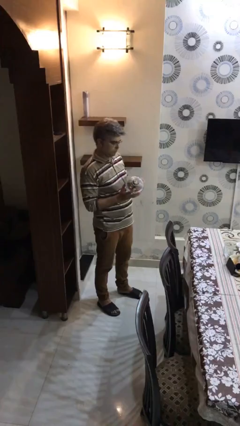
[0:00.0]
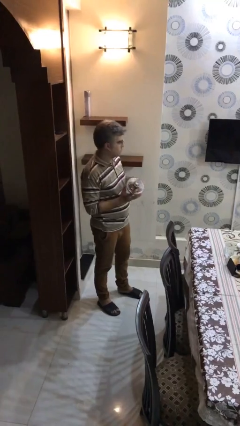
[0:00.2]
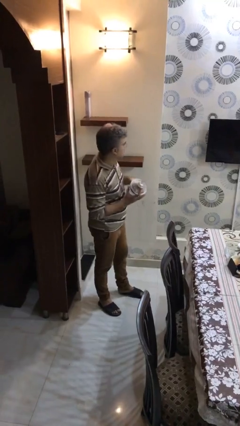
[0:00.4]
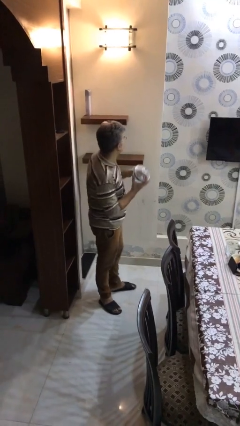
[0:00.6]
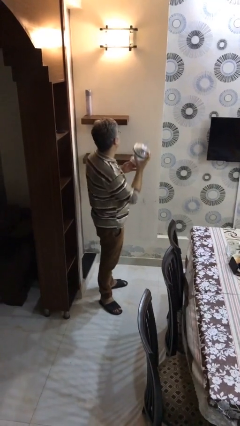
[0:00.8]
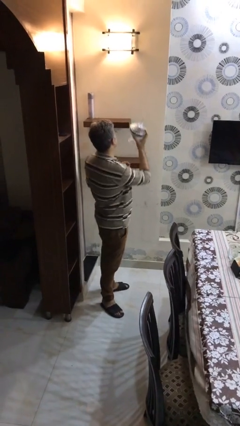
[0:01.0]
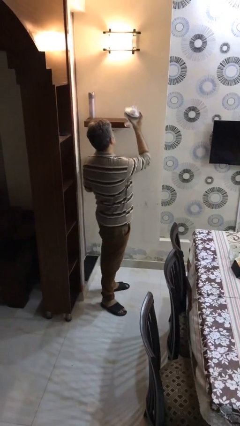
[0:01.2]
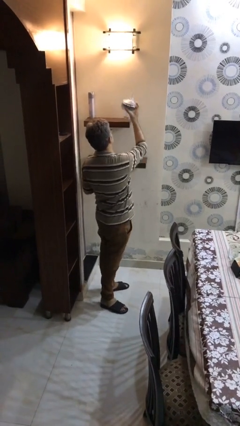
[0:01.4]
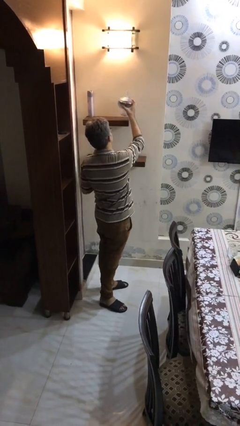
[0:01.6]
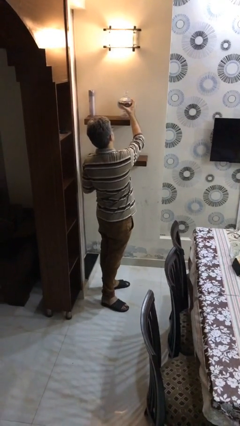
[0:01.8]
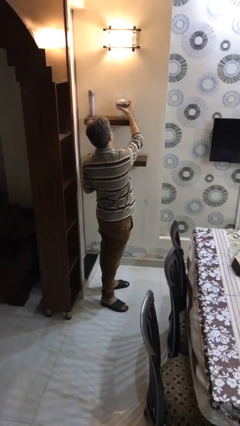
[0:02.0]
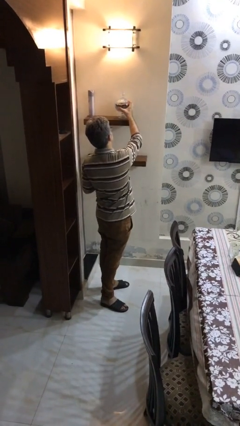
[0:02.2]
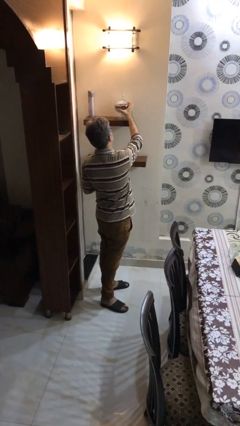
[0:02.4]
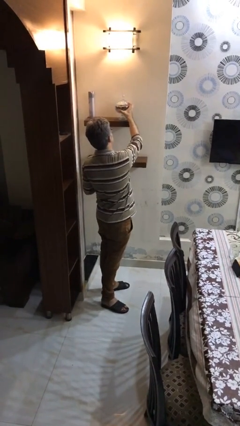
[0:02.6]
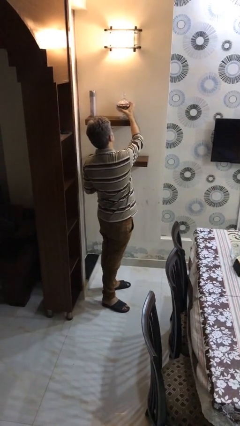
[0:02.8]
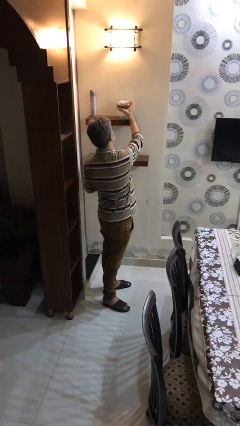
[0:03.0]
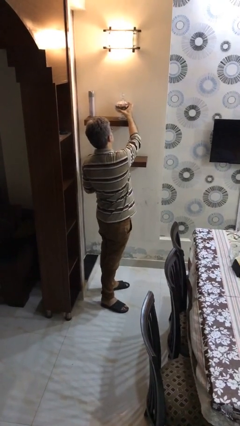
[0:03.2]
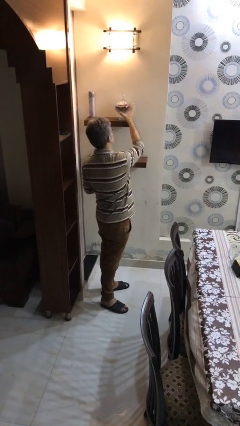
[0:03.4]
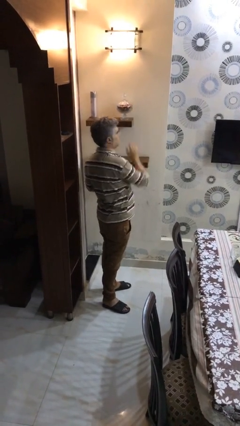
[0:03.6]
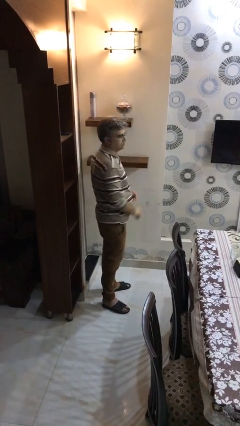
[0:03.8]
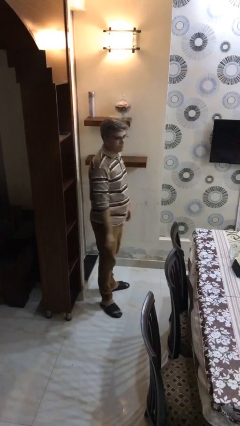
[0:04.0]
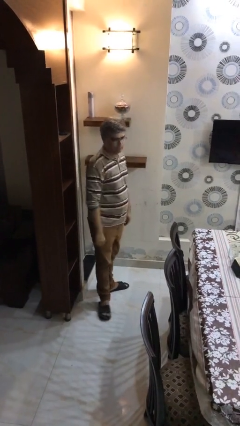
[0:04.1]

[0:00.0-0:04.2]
person puts down object on shelf

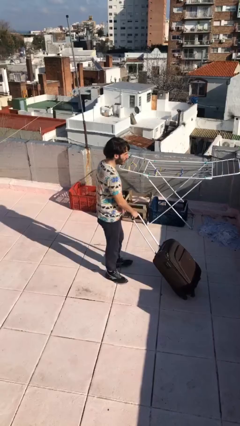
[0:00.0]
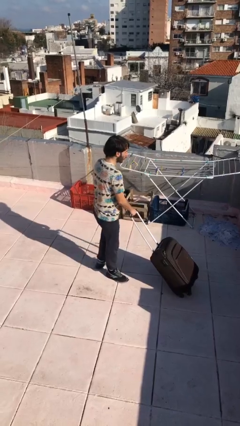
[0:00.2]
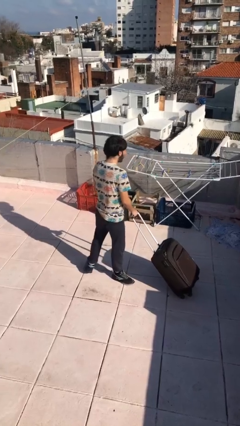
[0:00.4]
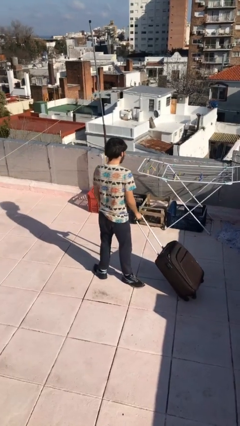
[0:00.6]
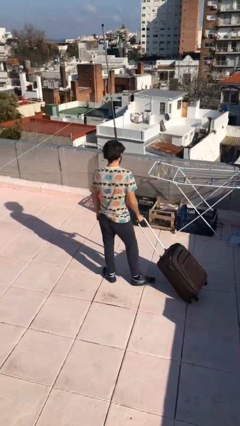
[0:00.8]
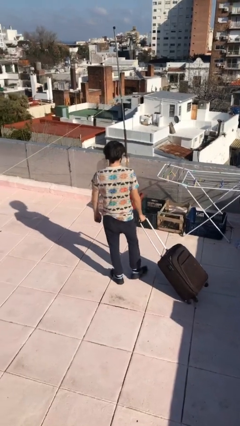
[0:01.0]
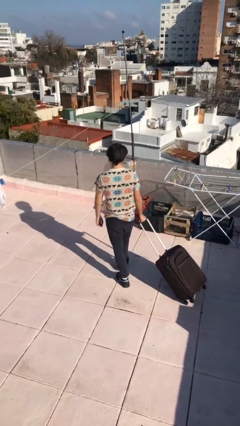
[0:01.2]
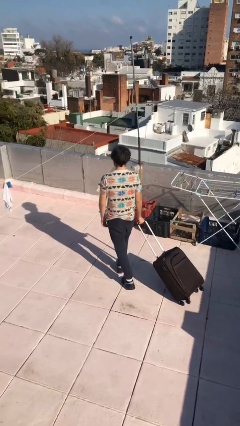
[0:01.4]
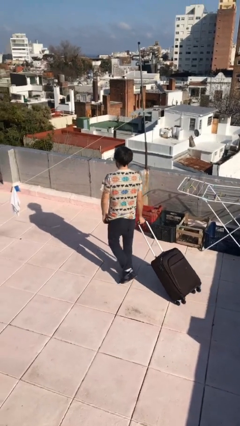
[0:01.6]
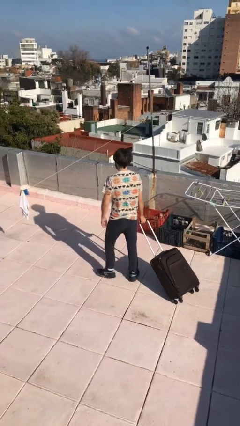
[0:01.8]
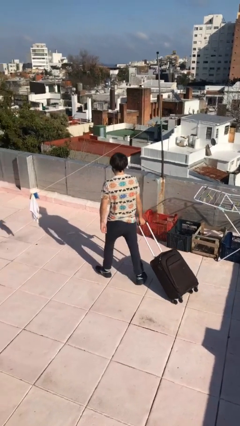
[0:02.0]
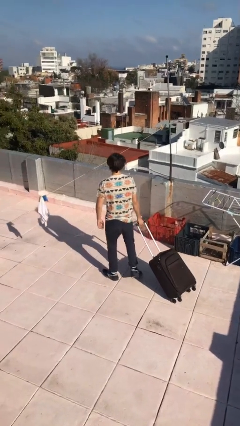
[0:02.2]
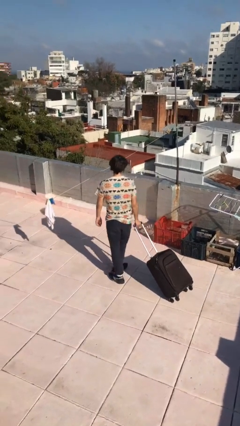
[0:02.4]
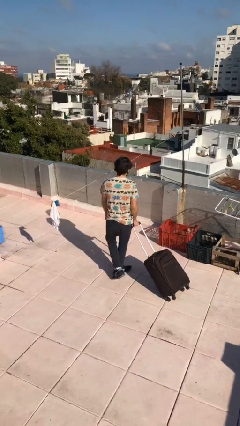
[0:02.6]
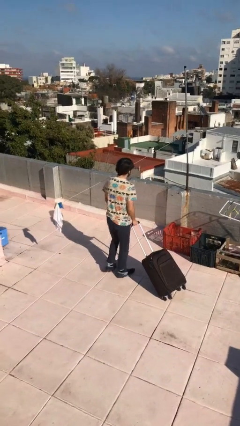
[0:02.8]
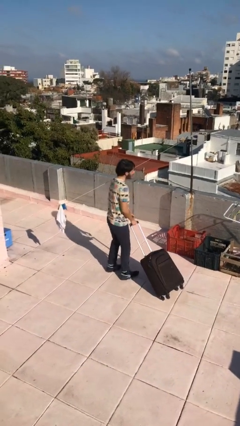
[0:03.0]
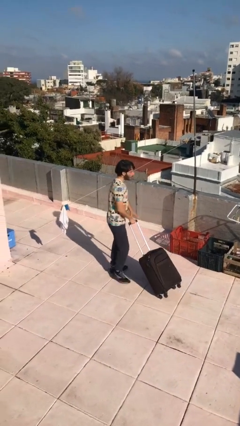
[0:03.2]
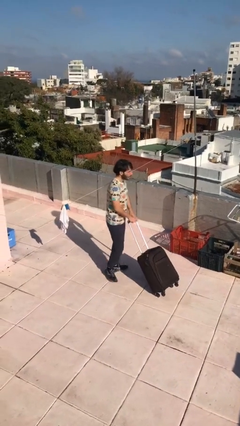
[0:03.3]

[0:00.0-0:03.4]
person pulls wheeled cart

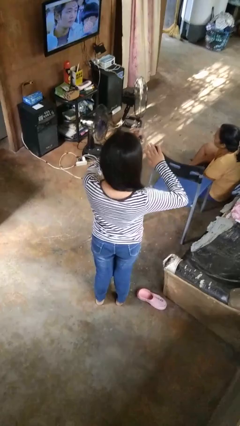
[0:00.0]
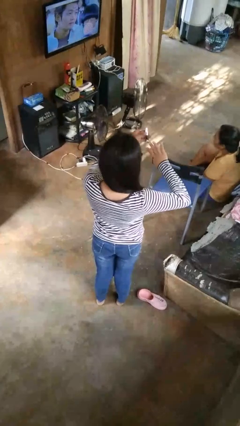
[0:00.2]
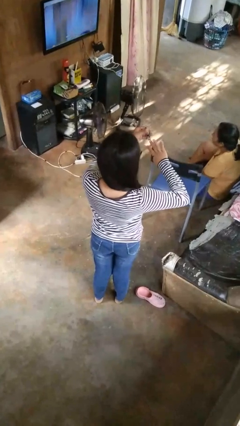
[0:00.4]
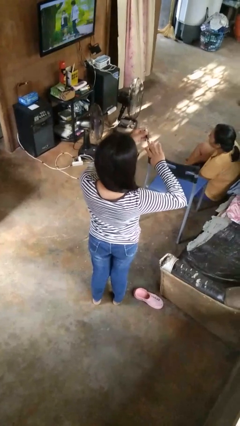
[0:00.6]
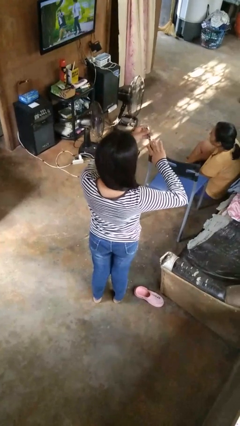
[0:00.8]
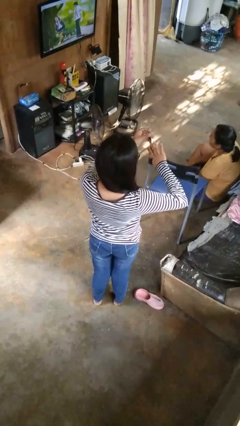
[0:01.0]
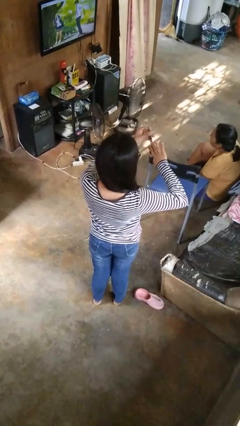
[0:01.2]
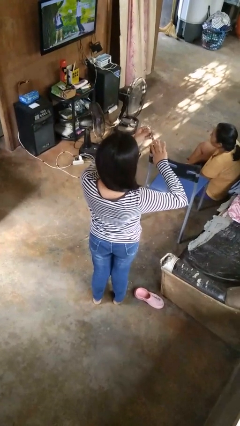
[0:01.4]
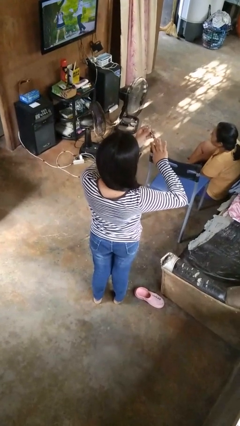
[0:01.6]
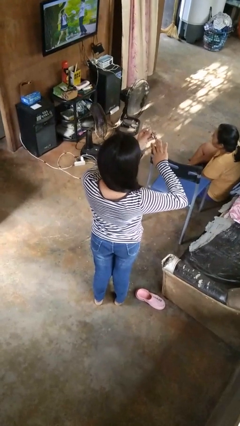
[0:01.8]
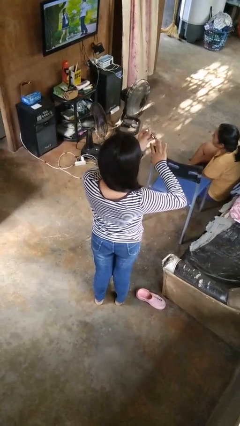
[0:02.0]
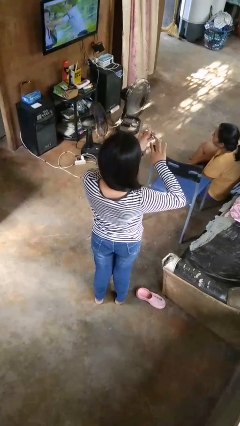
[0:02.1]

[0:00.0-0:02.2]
person clips fingernails

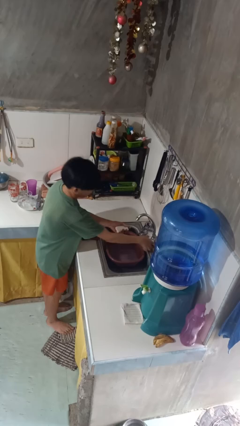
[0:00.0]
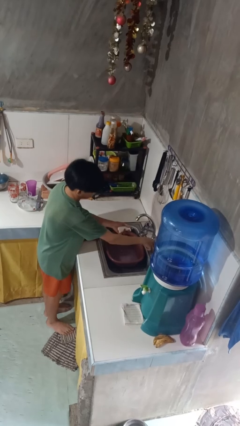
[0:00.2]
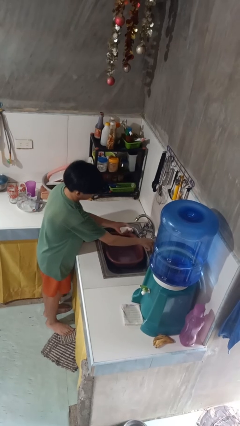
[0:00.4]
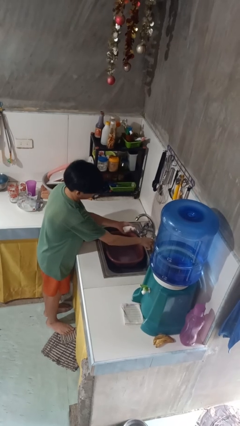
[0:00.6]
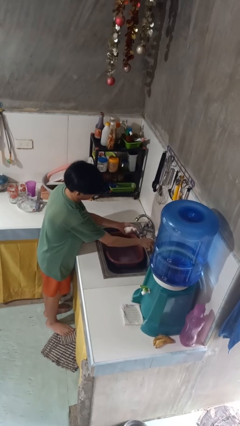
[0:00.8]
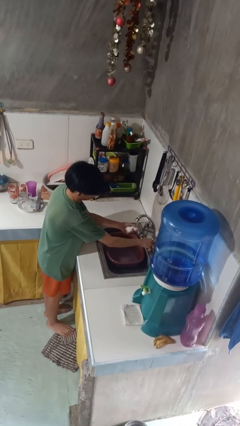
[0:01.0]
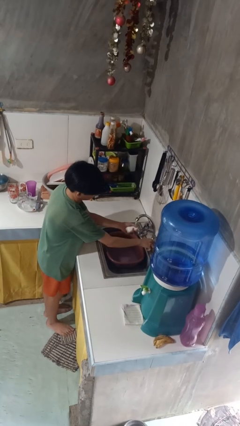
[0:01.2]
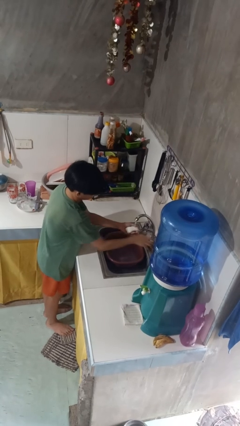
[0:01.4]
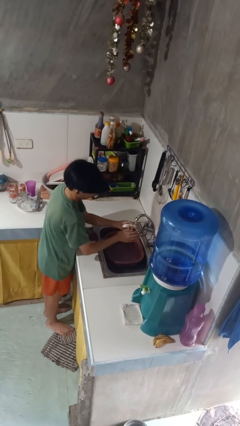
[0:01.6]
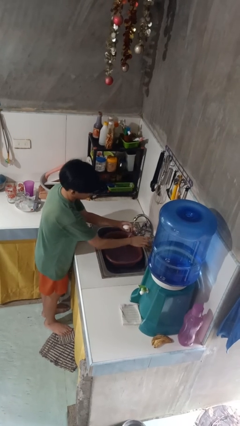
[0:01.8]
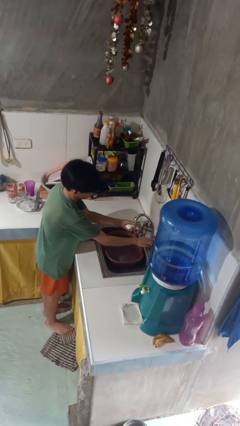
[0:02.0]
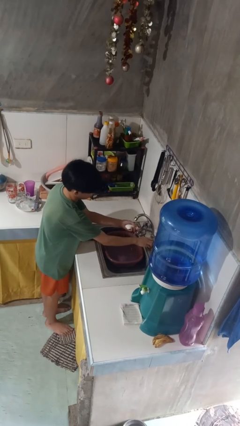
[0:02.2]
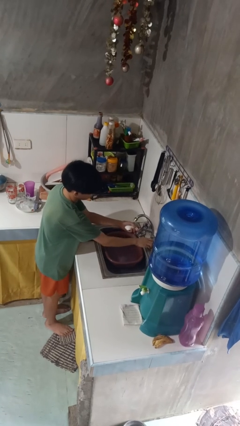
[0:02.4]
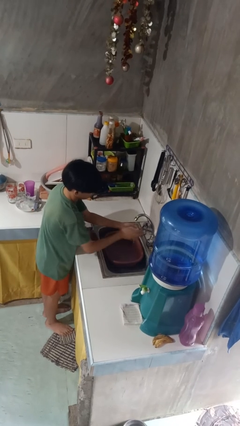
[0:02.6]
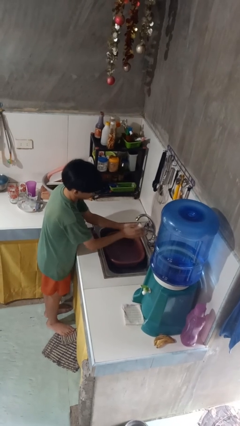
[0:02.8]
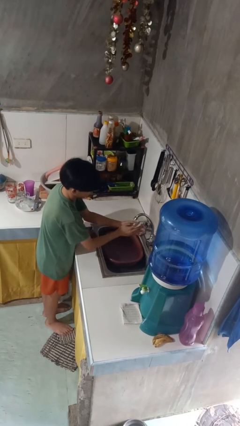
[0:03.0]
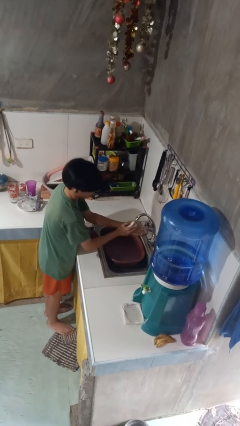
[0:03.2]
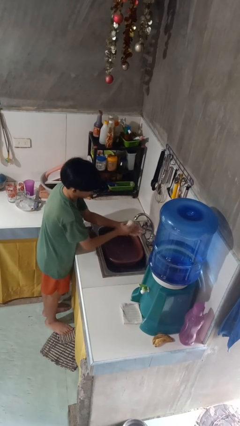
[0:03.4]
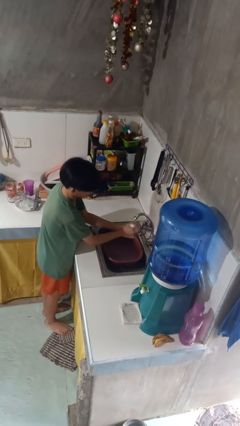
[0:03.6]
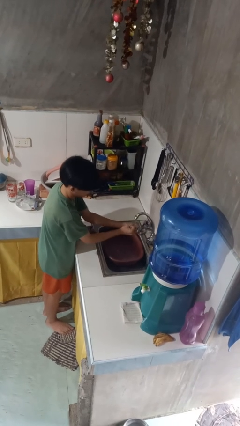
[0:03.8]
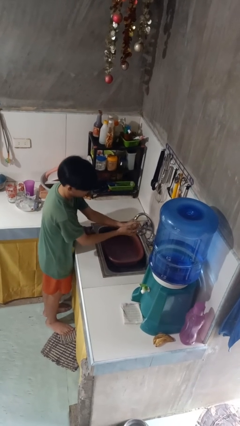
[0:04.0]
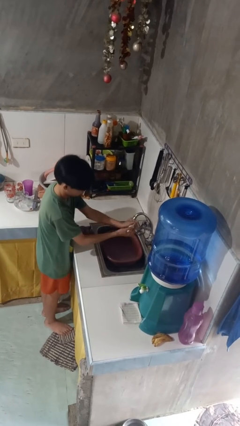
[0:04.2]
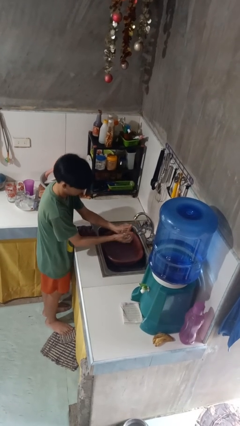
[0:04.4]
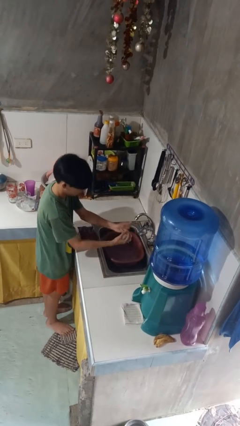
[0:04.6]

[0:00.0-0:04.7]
person washes hands

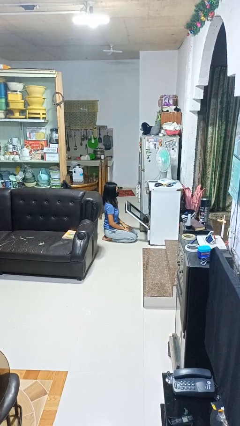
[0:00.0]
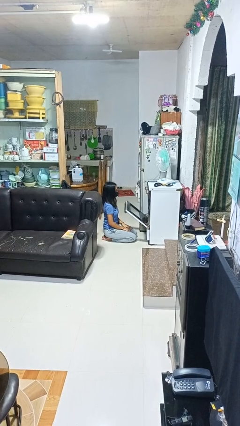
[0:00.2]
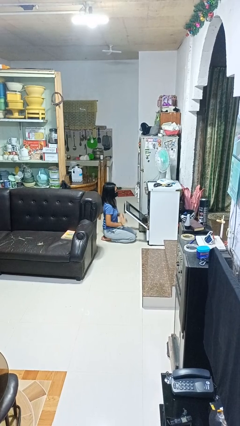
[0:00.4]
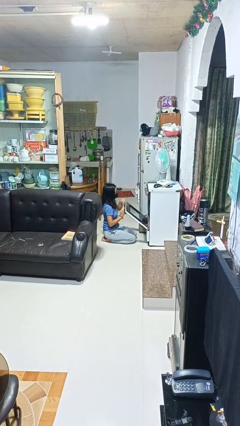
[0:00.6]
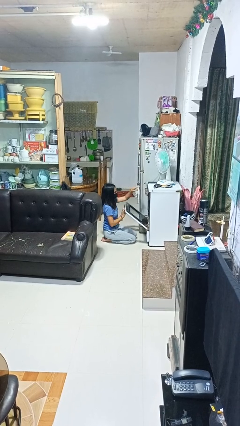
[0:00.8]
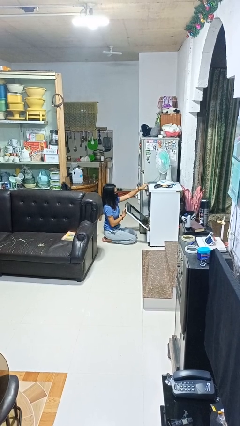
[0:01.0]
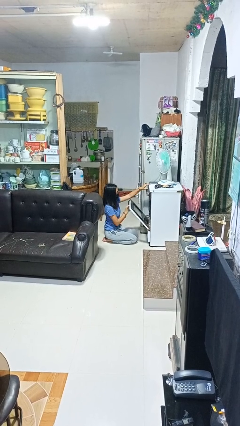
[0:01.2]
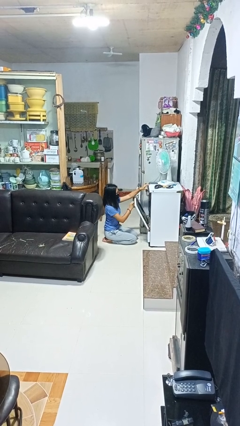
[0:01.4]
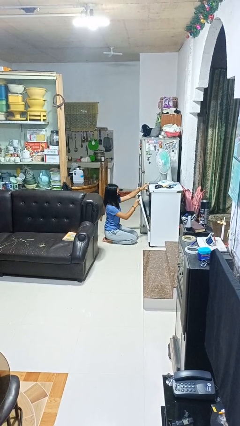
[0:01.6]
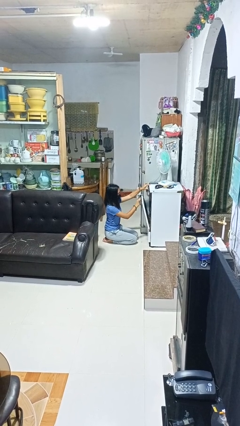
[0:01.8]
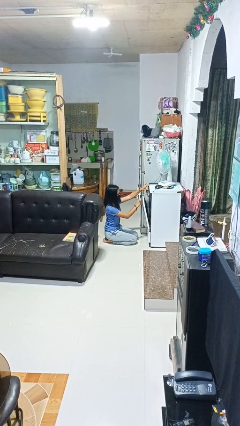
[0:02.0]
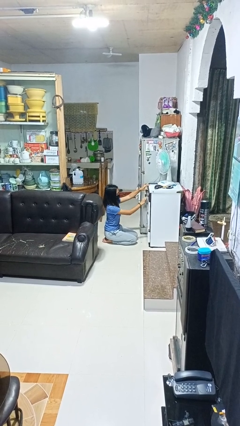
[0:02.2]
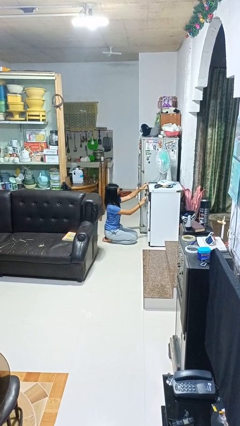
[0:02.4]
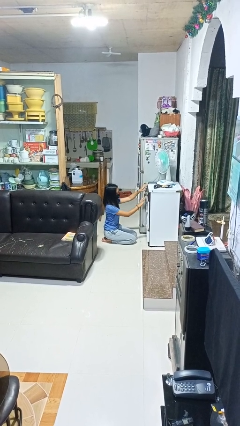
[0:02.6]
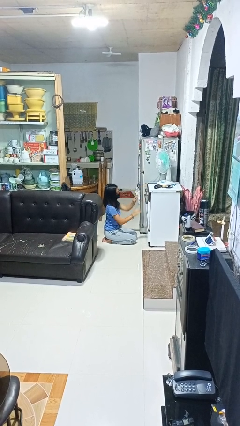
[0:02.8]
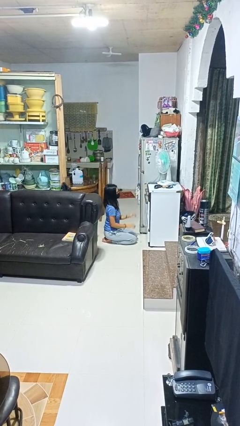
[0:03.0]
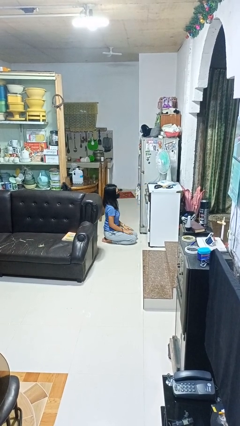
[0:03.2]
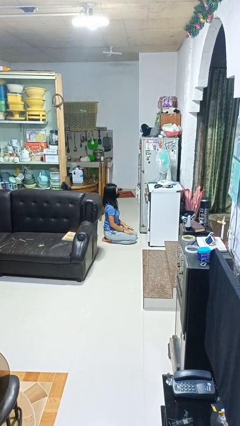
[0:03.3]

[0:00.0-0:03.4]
person closes oven door
